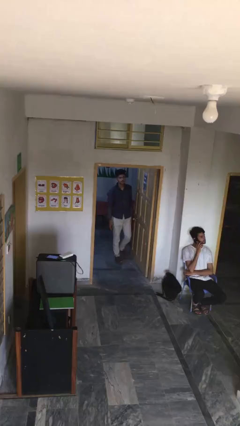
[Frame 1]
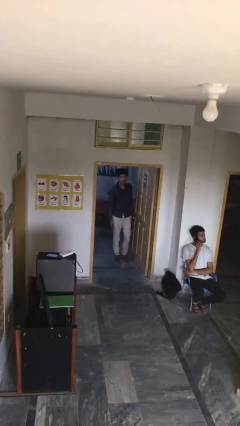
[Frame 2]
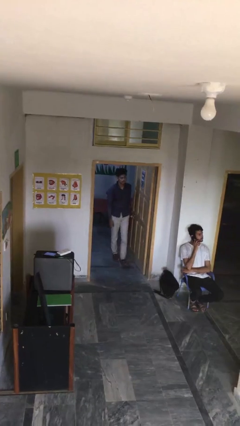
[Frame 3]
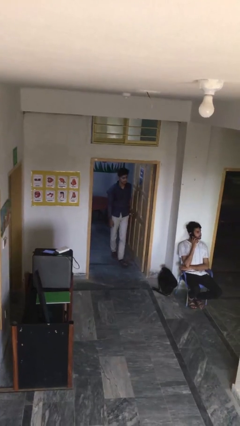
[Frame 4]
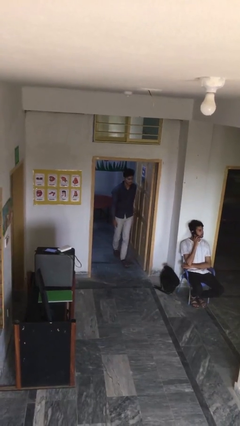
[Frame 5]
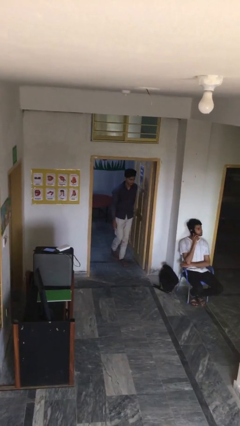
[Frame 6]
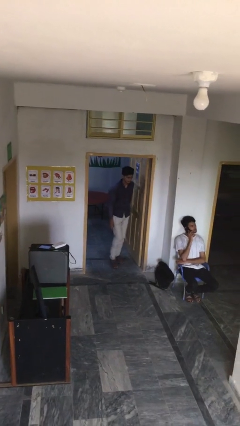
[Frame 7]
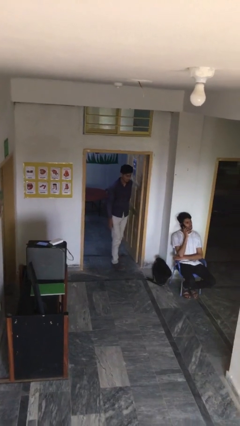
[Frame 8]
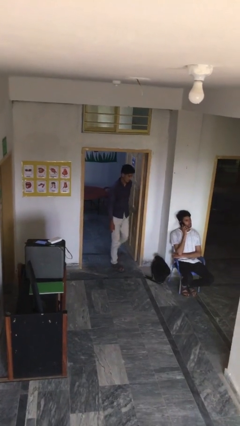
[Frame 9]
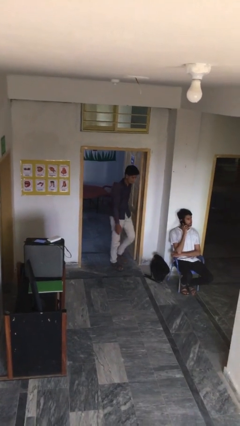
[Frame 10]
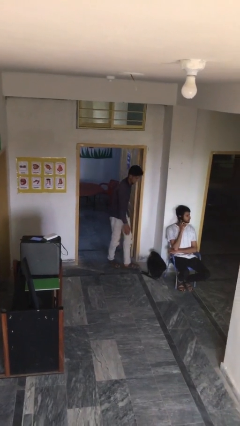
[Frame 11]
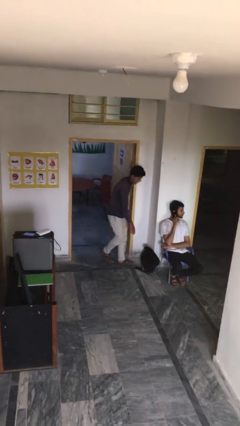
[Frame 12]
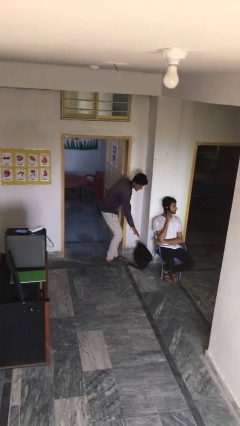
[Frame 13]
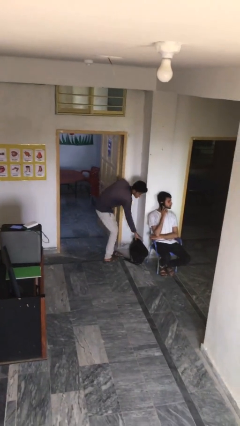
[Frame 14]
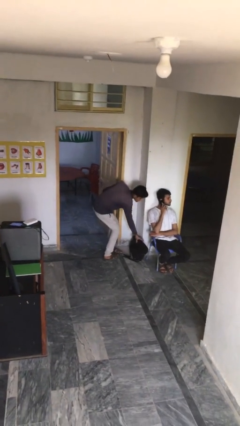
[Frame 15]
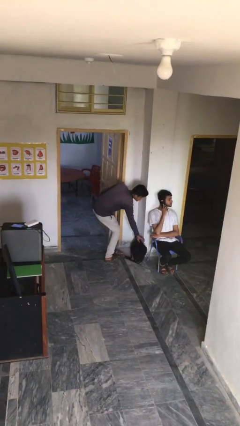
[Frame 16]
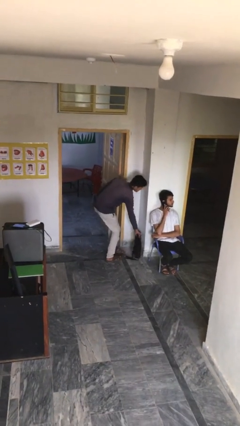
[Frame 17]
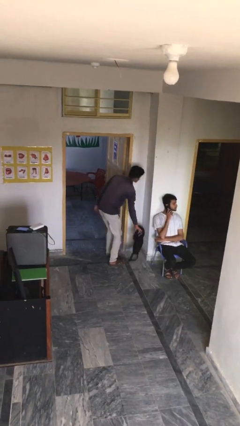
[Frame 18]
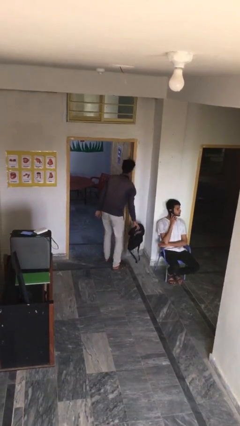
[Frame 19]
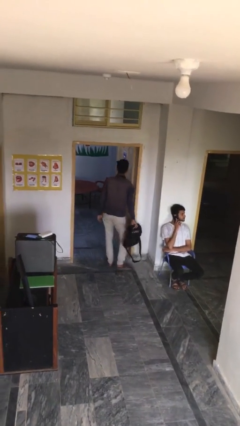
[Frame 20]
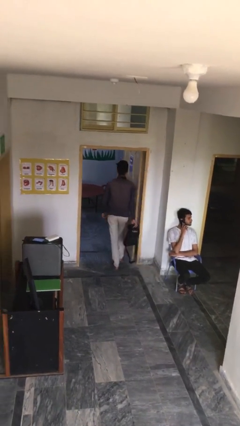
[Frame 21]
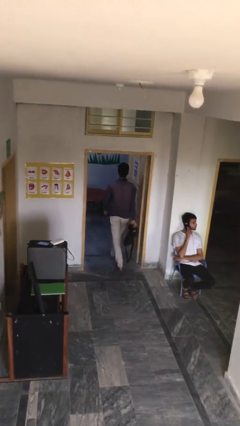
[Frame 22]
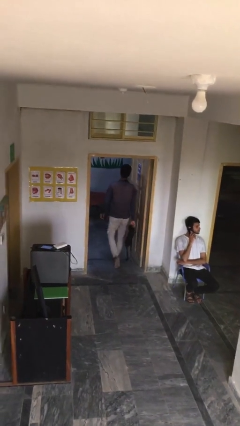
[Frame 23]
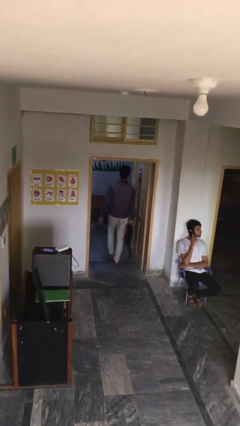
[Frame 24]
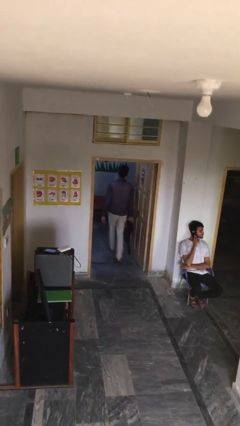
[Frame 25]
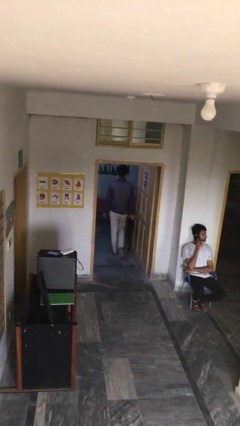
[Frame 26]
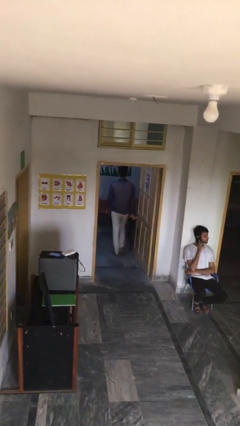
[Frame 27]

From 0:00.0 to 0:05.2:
person steals object from person

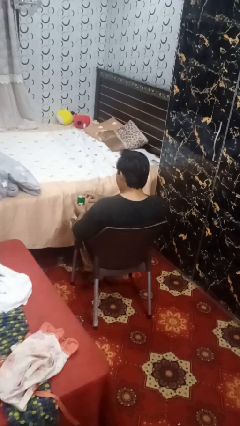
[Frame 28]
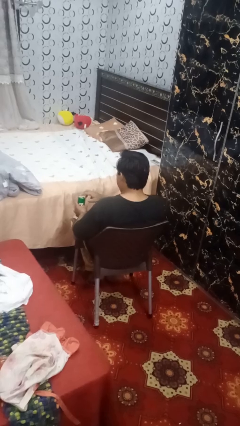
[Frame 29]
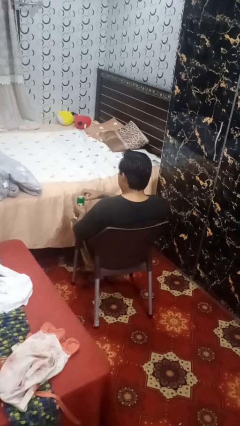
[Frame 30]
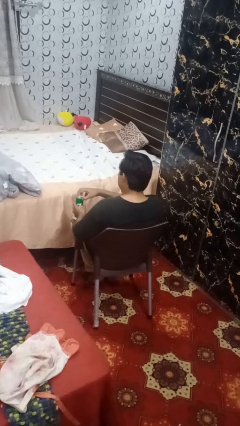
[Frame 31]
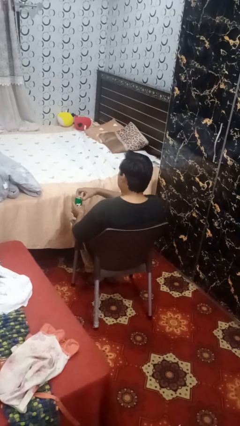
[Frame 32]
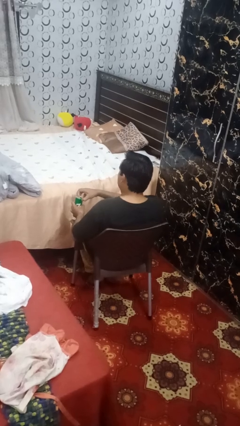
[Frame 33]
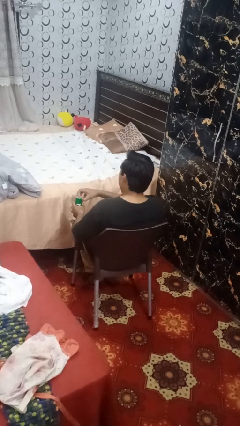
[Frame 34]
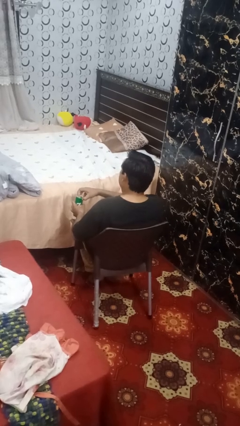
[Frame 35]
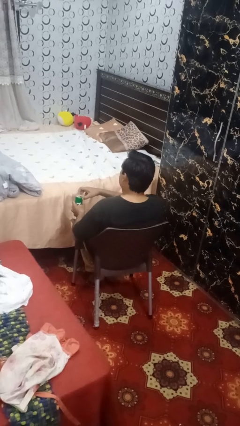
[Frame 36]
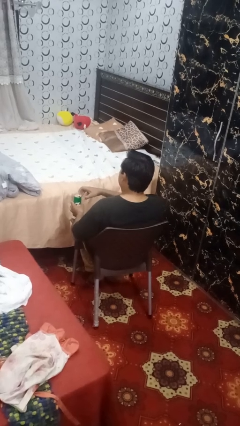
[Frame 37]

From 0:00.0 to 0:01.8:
person opens beverage can

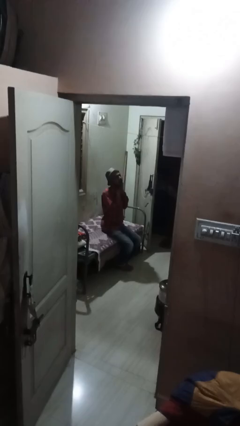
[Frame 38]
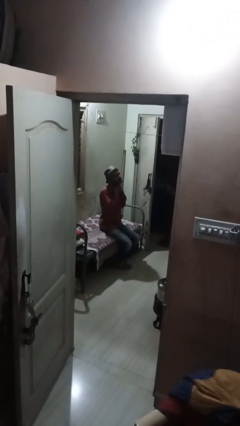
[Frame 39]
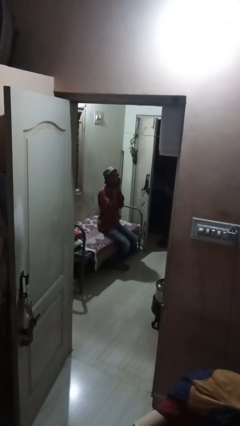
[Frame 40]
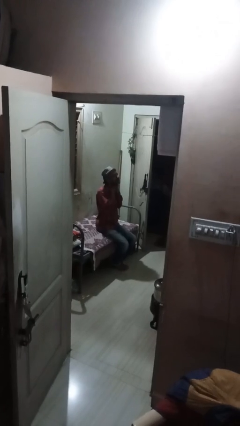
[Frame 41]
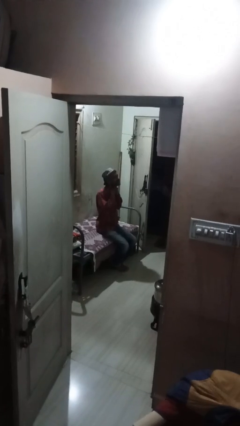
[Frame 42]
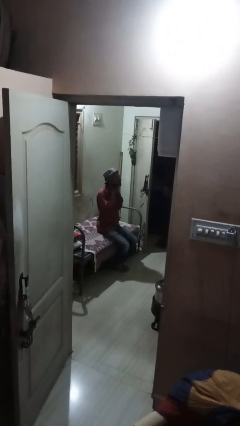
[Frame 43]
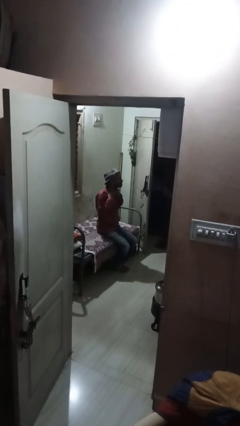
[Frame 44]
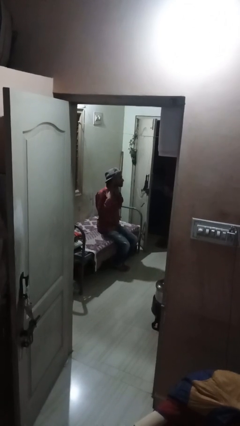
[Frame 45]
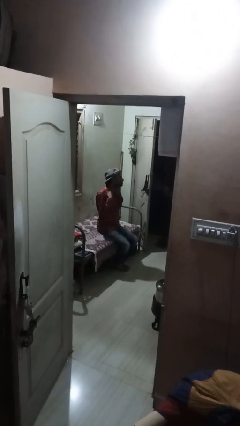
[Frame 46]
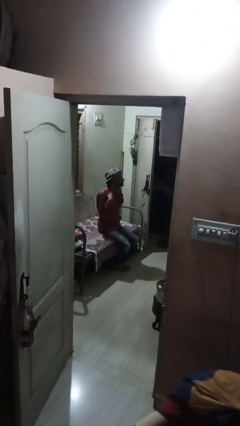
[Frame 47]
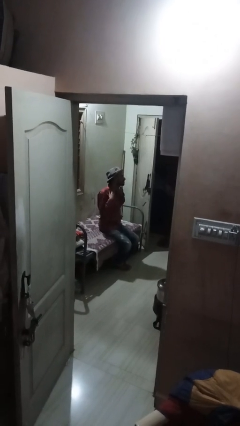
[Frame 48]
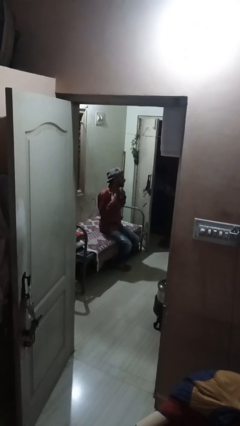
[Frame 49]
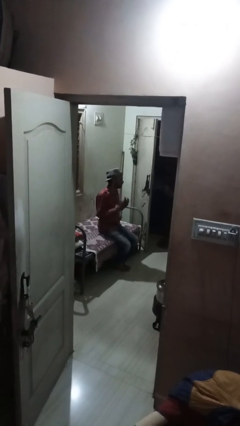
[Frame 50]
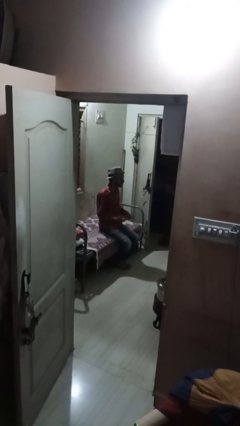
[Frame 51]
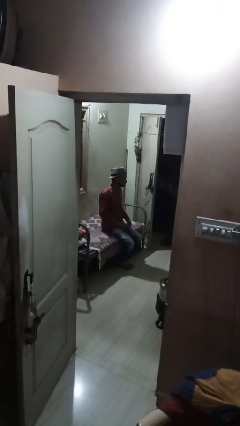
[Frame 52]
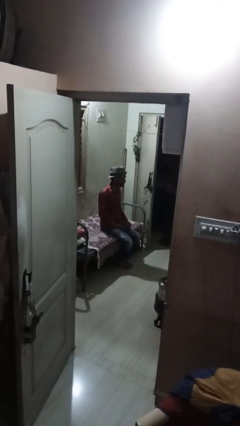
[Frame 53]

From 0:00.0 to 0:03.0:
person rubs neck

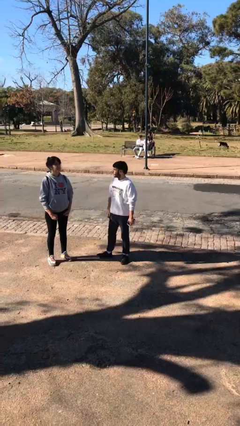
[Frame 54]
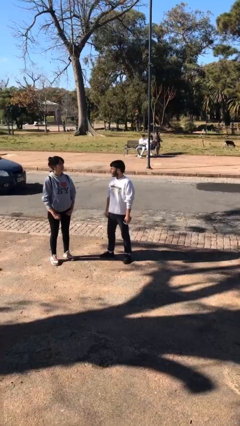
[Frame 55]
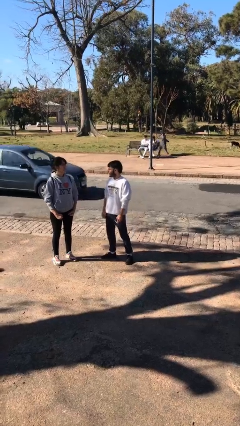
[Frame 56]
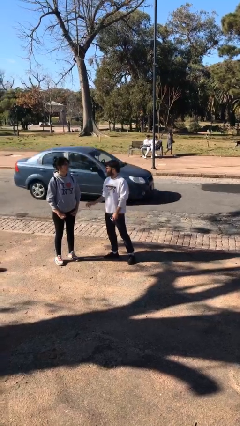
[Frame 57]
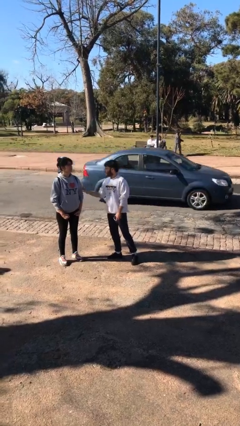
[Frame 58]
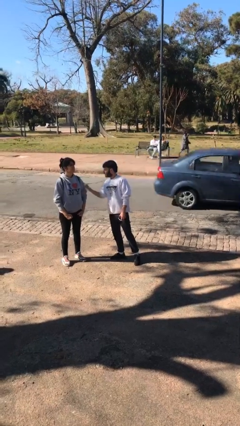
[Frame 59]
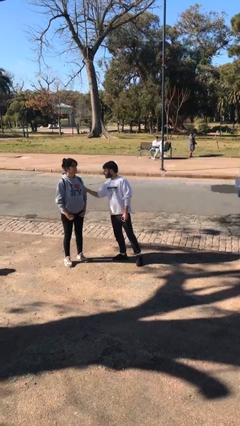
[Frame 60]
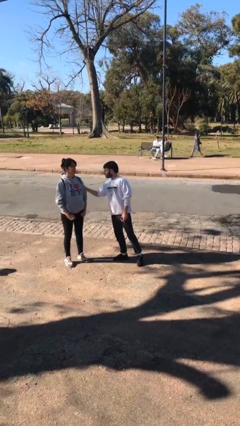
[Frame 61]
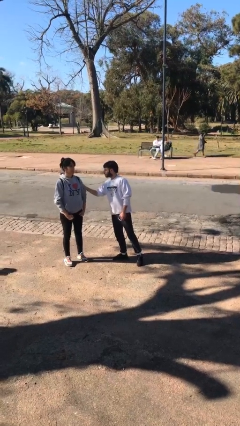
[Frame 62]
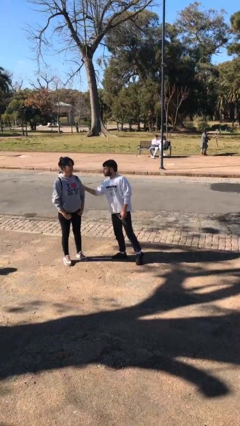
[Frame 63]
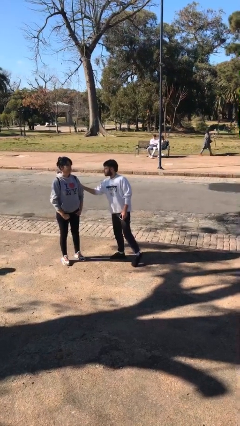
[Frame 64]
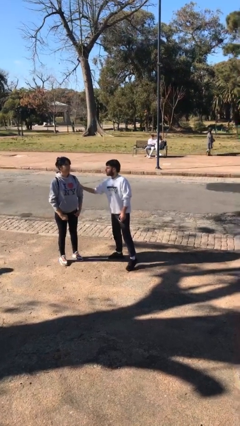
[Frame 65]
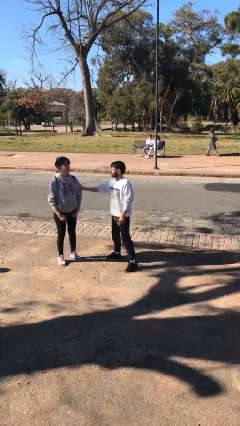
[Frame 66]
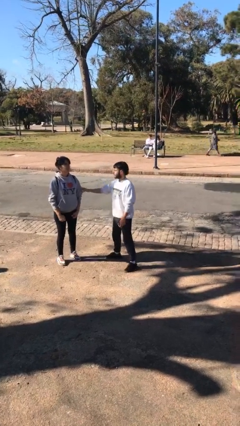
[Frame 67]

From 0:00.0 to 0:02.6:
person grabs person by bicep

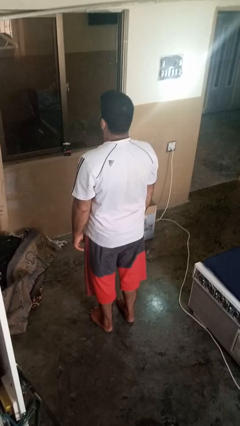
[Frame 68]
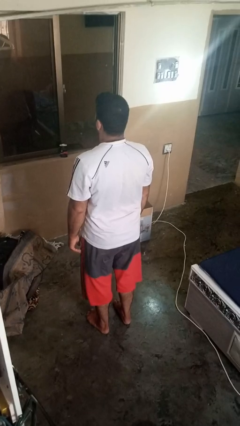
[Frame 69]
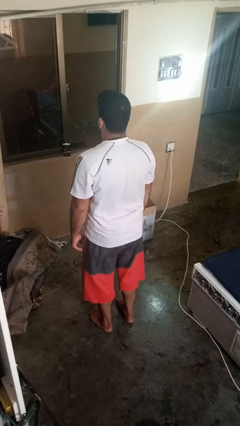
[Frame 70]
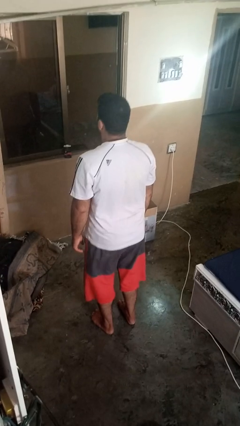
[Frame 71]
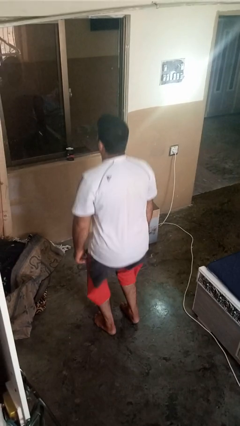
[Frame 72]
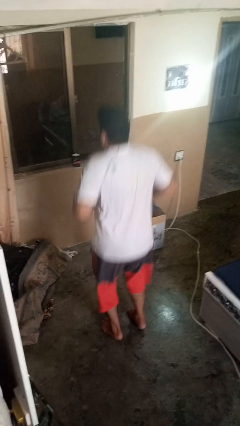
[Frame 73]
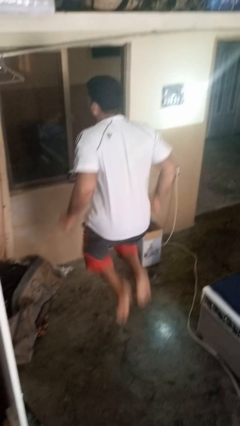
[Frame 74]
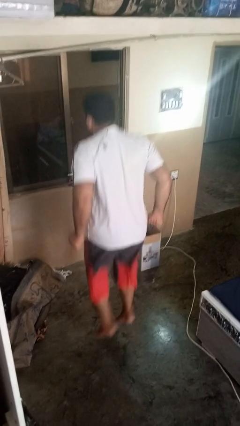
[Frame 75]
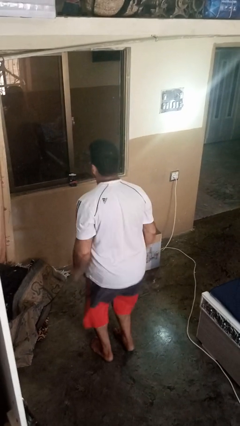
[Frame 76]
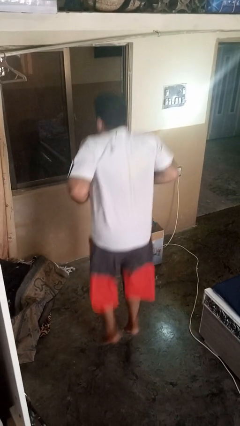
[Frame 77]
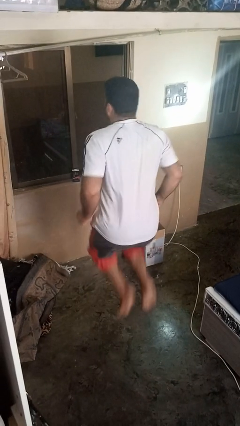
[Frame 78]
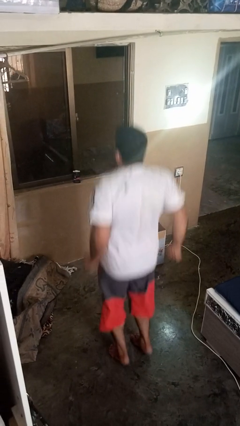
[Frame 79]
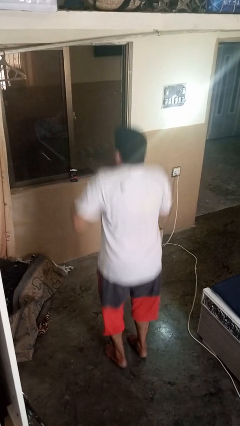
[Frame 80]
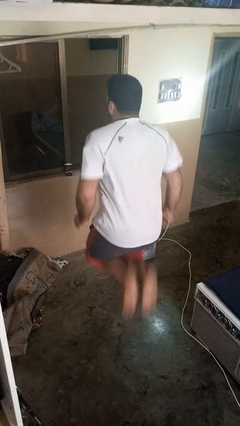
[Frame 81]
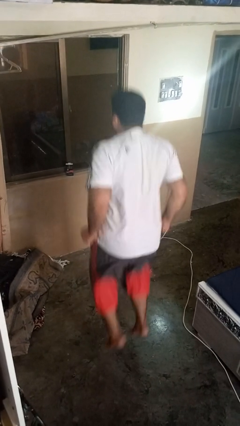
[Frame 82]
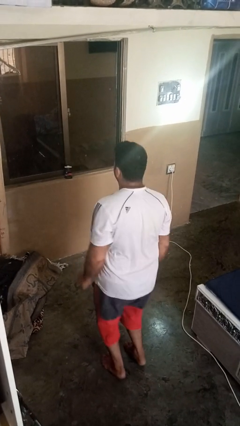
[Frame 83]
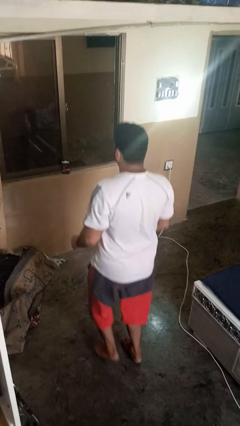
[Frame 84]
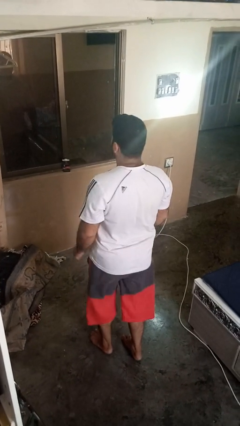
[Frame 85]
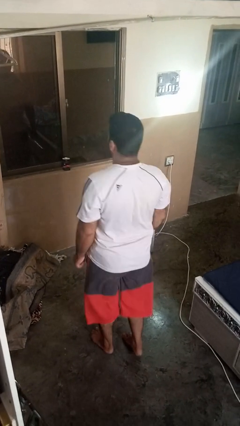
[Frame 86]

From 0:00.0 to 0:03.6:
person jumps

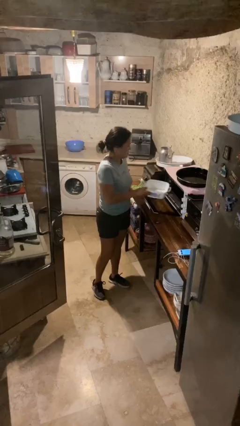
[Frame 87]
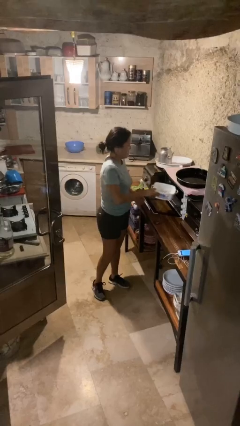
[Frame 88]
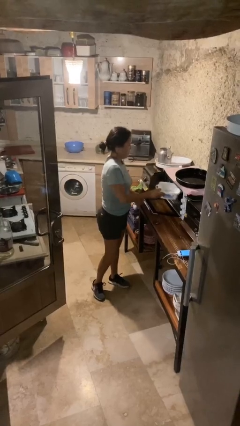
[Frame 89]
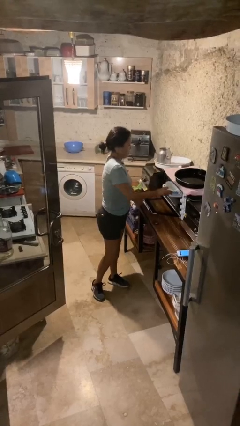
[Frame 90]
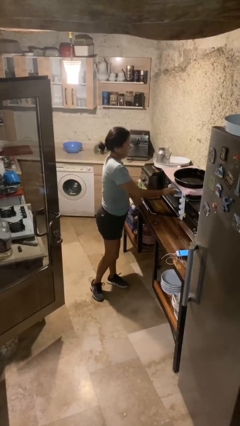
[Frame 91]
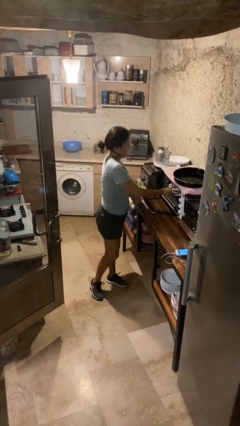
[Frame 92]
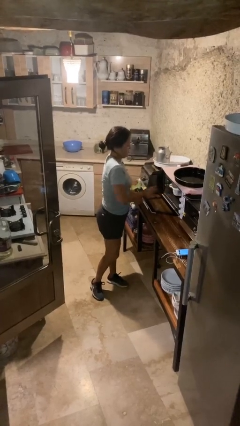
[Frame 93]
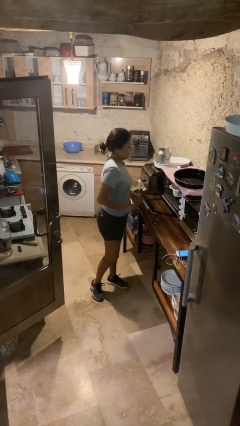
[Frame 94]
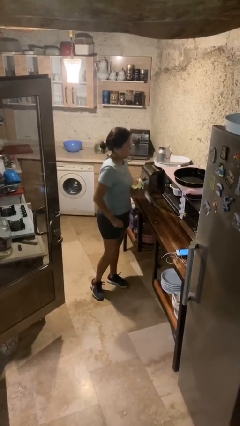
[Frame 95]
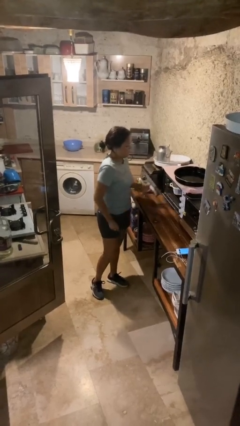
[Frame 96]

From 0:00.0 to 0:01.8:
person puts object into microwave
